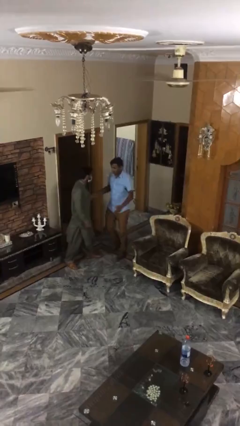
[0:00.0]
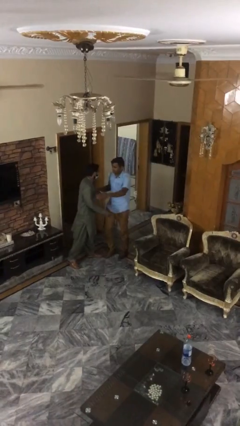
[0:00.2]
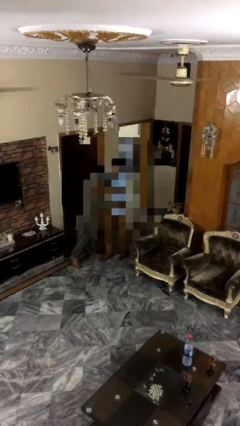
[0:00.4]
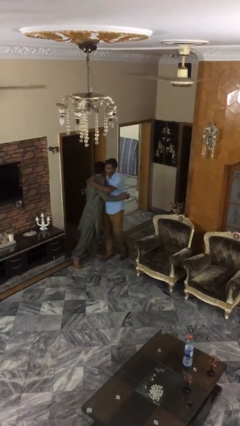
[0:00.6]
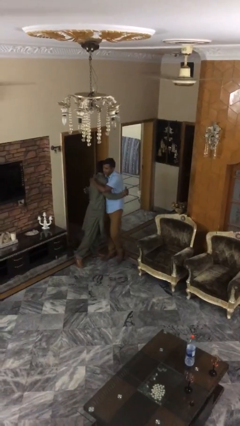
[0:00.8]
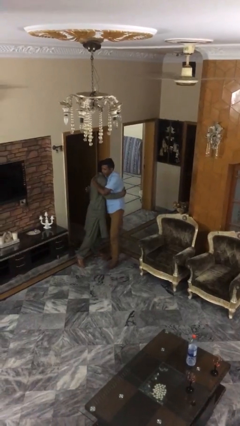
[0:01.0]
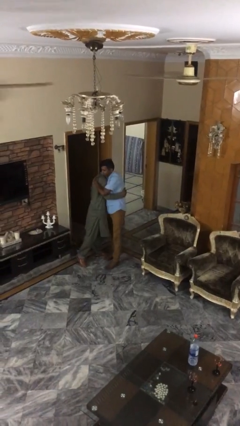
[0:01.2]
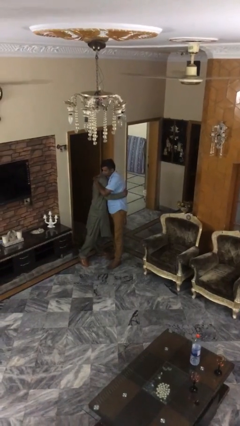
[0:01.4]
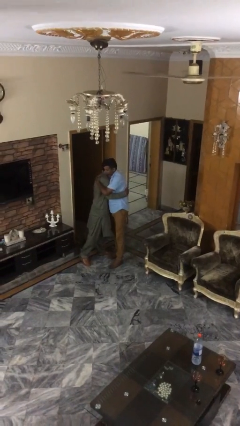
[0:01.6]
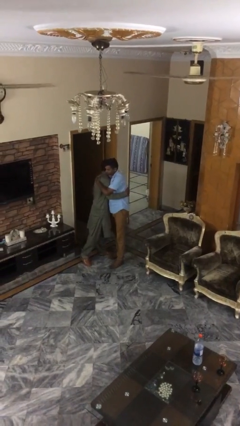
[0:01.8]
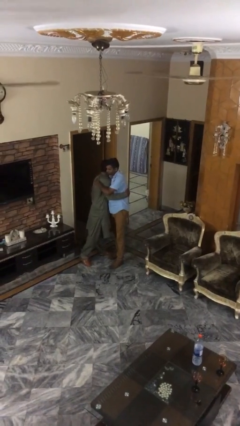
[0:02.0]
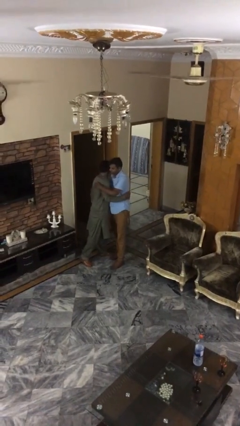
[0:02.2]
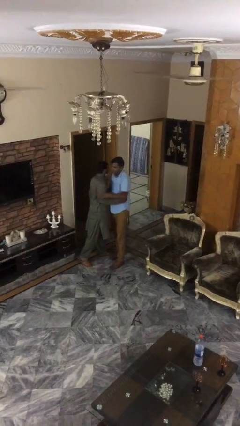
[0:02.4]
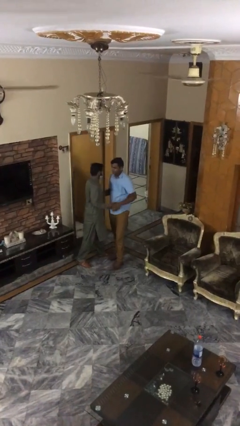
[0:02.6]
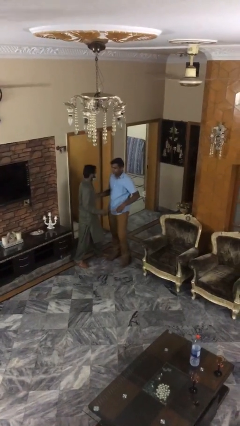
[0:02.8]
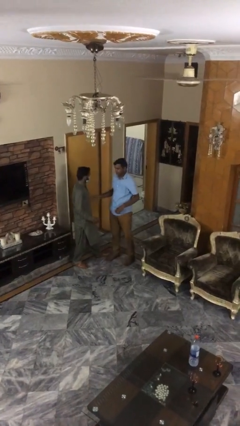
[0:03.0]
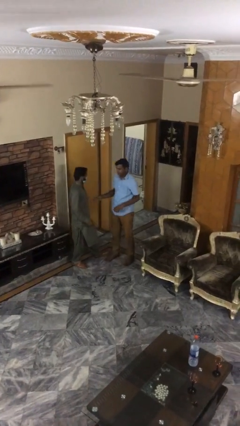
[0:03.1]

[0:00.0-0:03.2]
person embraces person

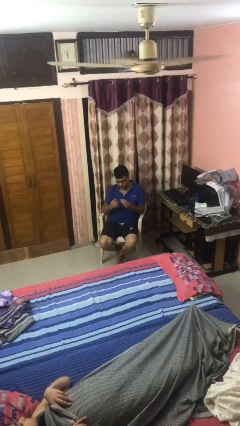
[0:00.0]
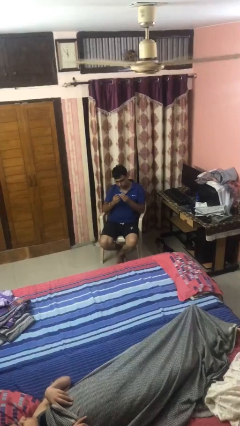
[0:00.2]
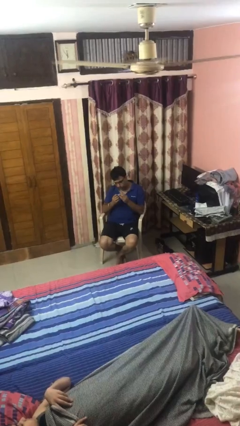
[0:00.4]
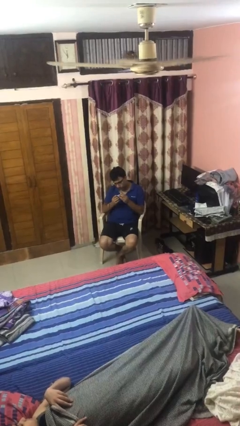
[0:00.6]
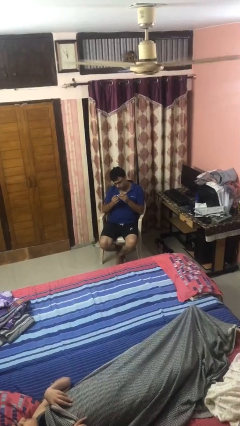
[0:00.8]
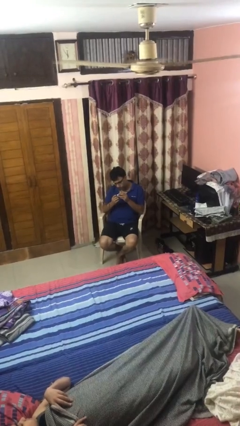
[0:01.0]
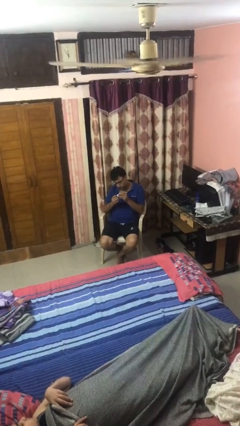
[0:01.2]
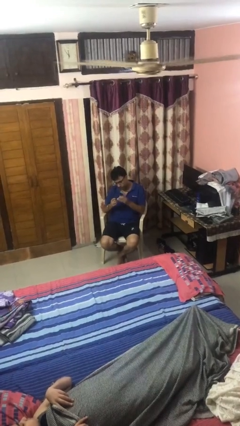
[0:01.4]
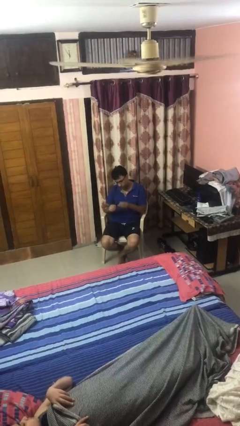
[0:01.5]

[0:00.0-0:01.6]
person clips fingernails

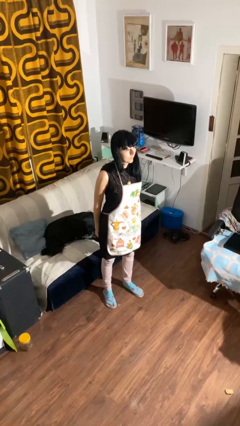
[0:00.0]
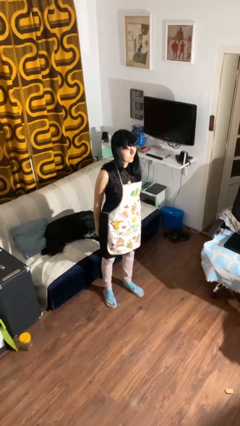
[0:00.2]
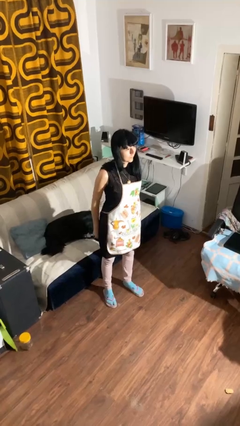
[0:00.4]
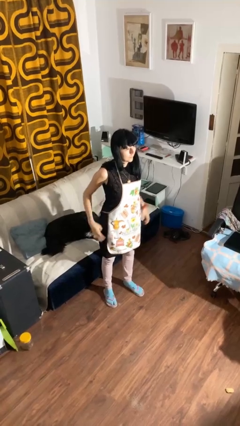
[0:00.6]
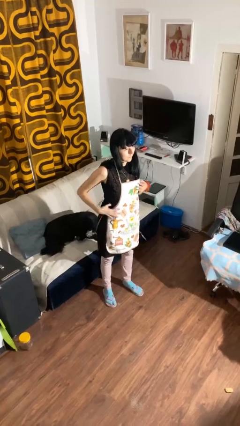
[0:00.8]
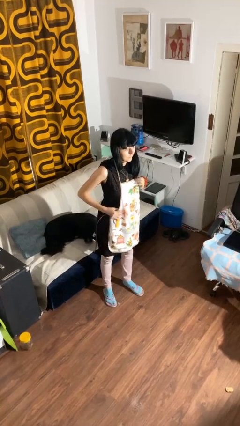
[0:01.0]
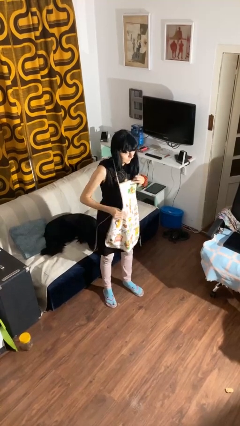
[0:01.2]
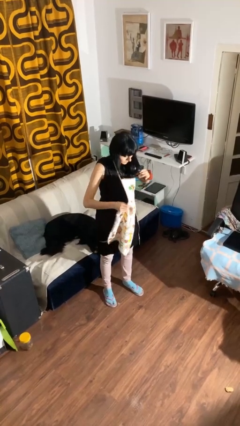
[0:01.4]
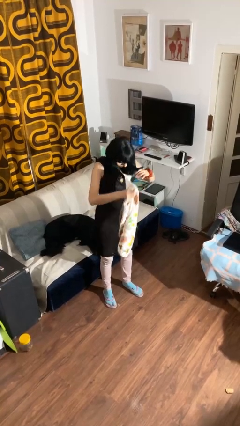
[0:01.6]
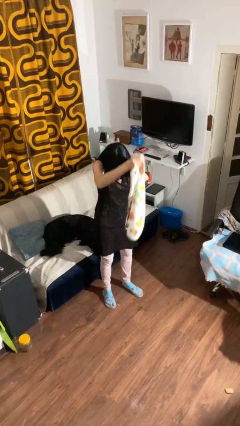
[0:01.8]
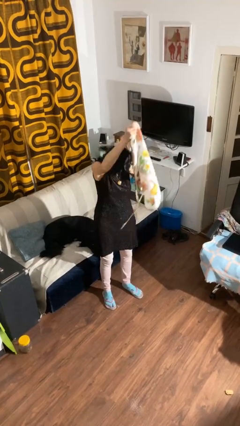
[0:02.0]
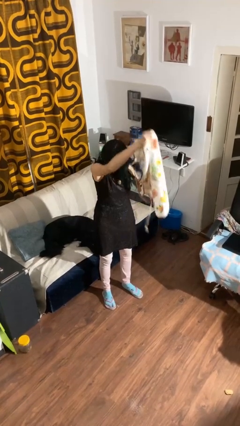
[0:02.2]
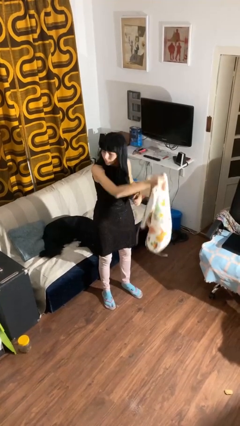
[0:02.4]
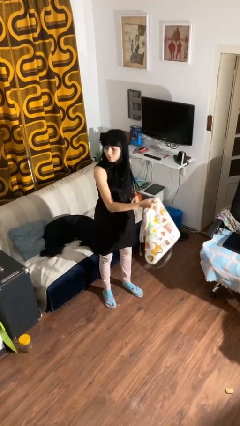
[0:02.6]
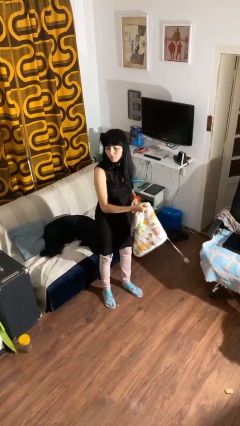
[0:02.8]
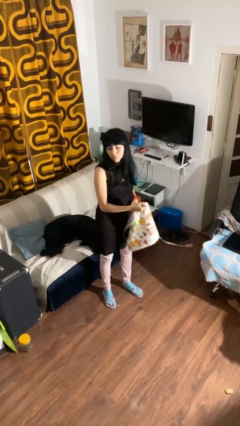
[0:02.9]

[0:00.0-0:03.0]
person takes off apron

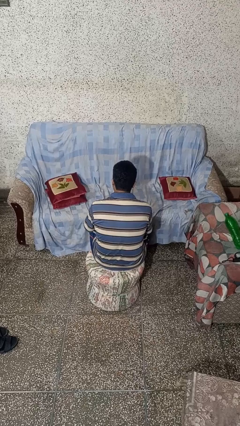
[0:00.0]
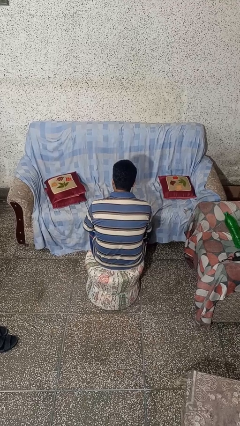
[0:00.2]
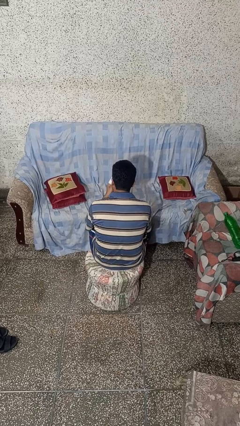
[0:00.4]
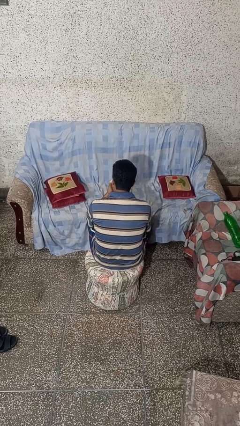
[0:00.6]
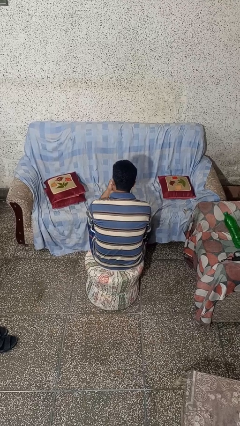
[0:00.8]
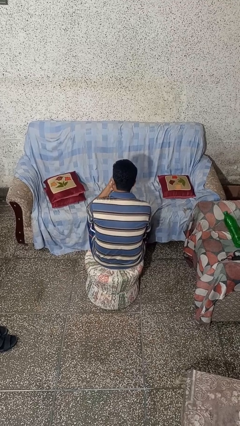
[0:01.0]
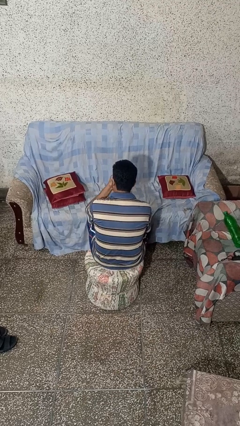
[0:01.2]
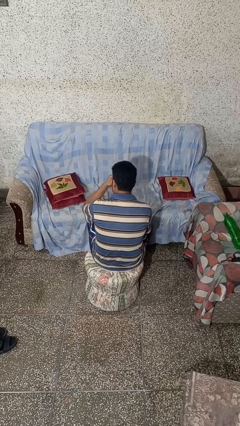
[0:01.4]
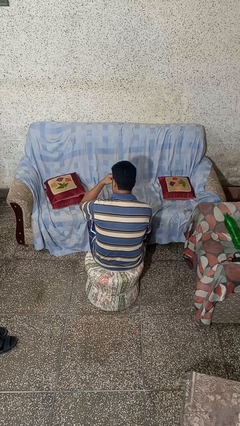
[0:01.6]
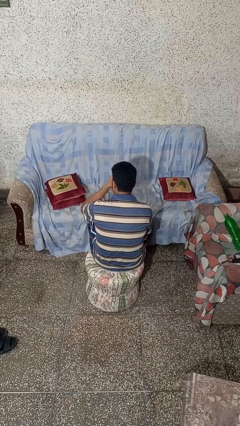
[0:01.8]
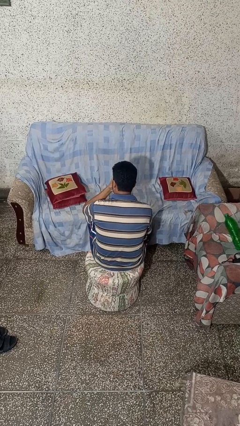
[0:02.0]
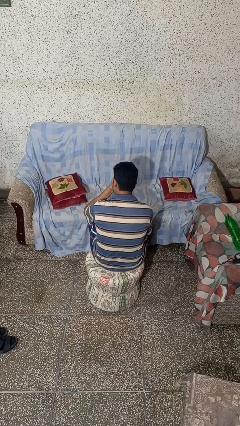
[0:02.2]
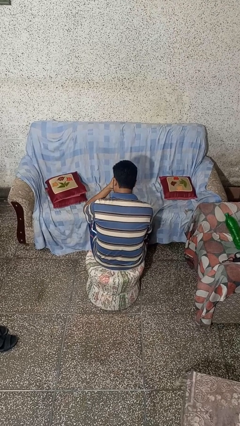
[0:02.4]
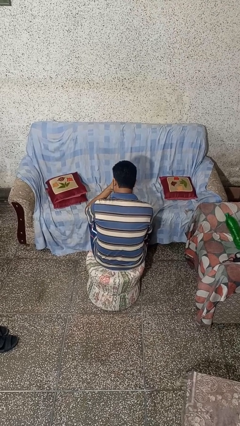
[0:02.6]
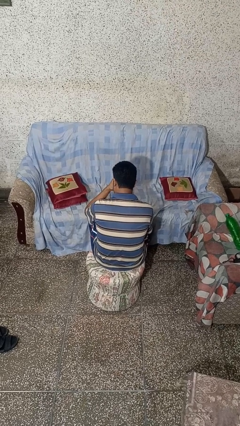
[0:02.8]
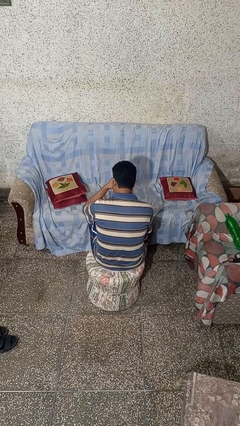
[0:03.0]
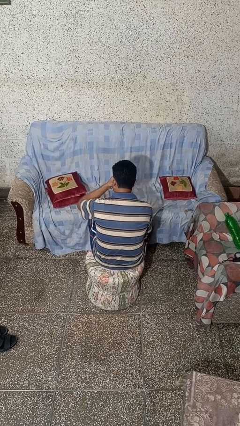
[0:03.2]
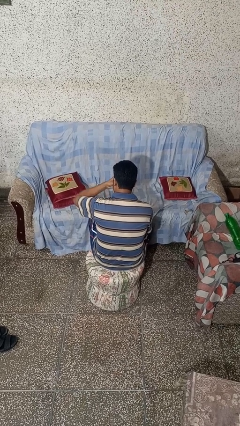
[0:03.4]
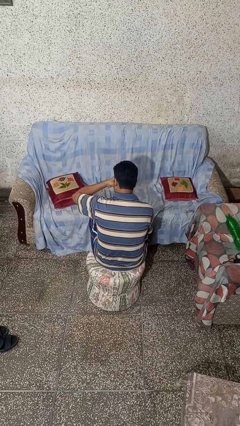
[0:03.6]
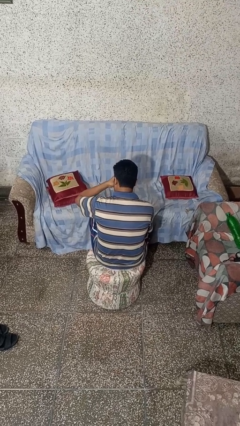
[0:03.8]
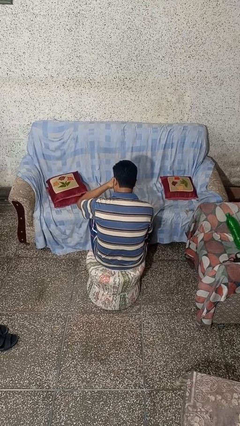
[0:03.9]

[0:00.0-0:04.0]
person blows nose

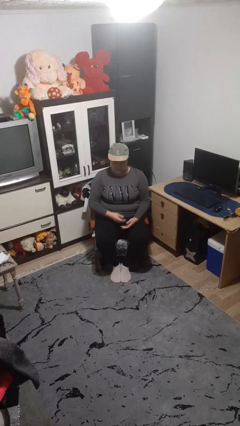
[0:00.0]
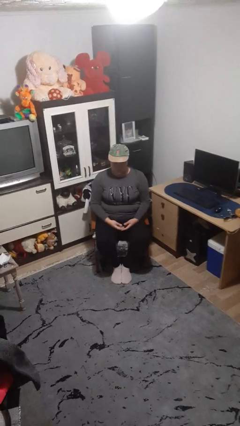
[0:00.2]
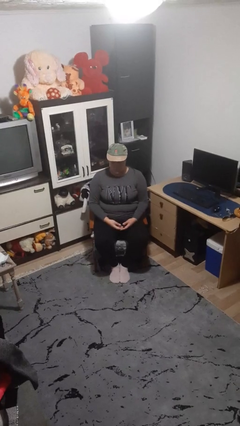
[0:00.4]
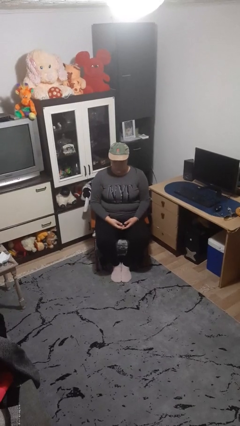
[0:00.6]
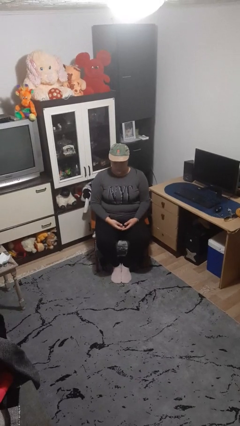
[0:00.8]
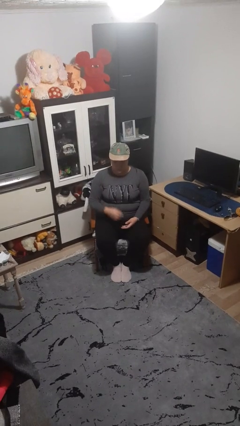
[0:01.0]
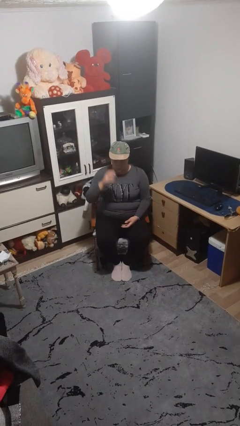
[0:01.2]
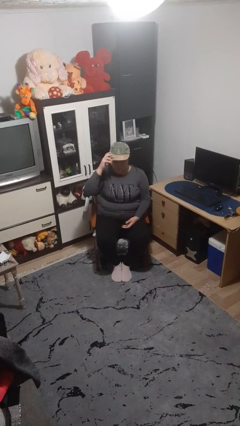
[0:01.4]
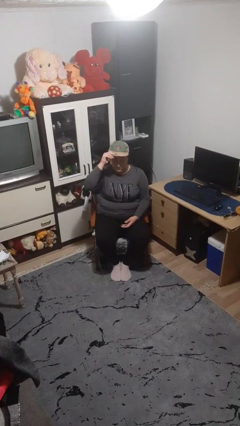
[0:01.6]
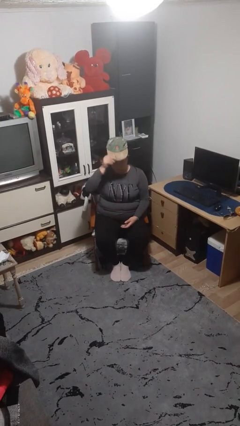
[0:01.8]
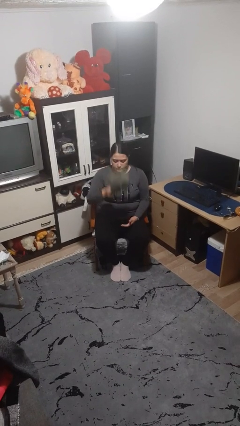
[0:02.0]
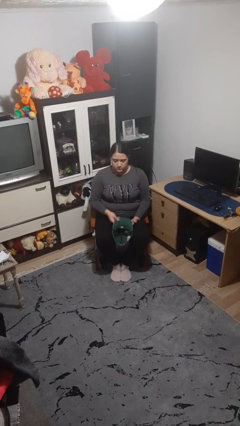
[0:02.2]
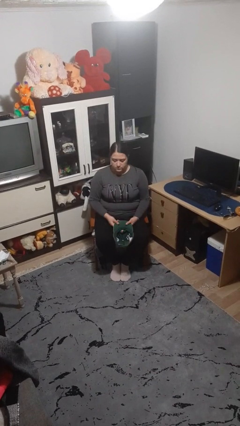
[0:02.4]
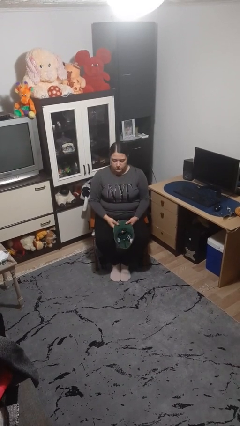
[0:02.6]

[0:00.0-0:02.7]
person takes off hat

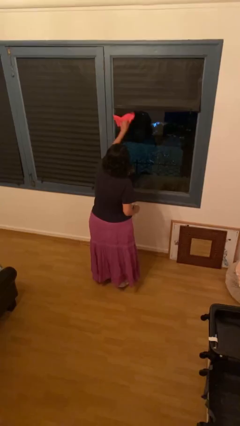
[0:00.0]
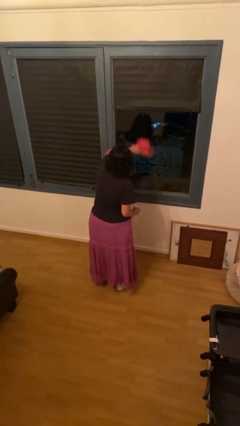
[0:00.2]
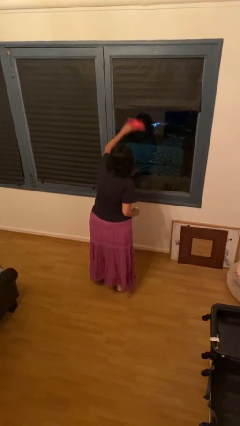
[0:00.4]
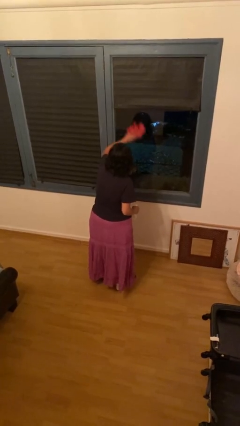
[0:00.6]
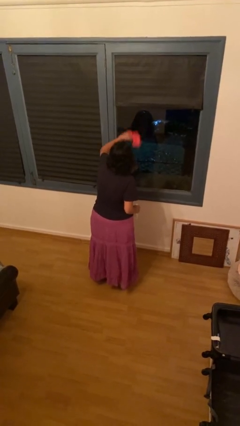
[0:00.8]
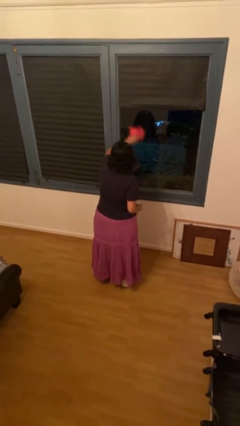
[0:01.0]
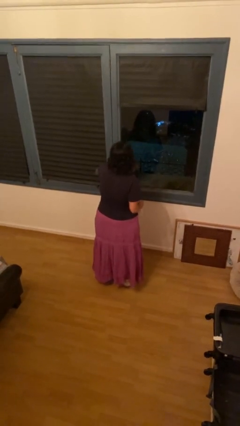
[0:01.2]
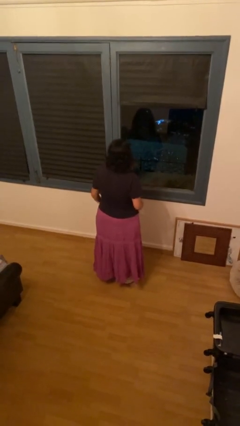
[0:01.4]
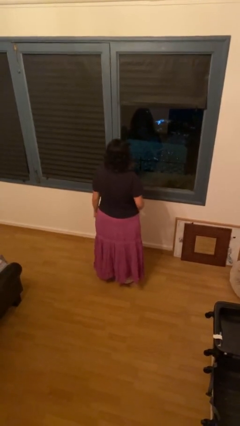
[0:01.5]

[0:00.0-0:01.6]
person washes window

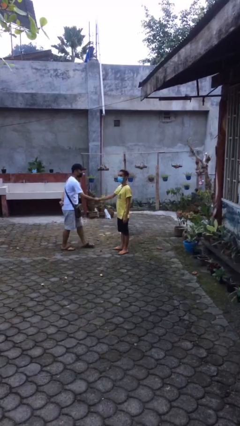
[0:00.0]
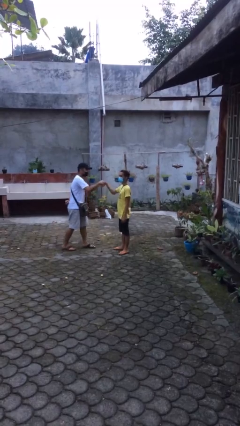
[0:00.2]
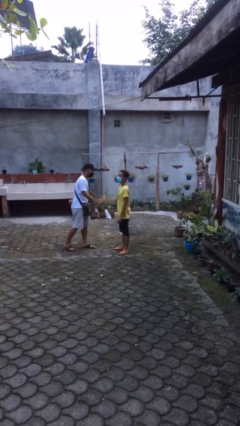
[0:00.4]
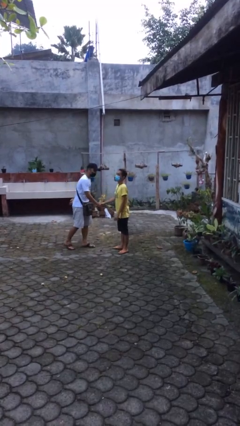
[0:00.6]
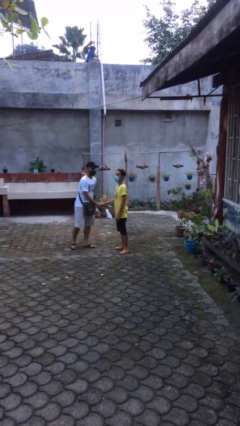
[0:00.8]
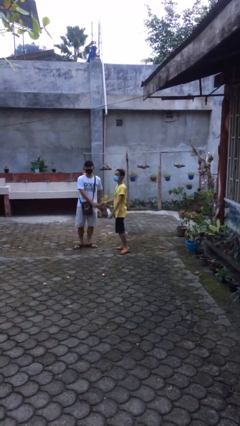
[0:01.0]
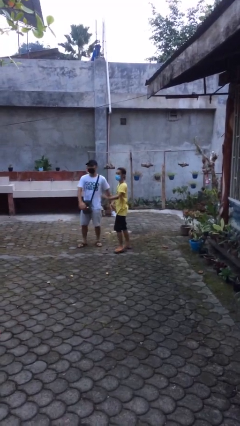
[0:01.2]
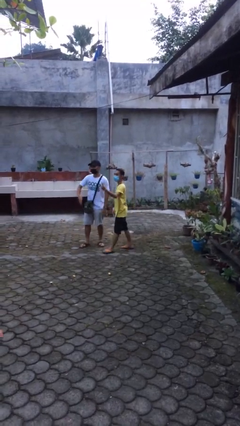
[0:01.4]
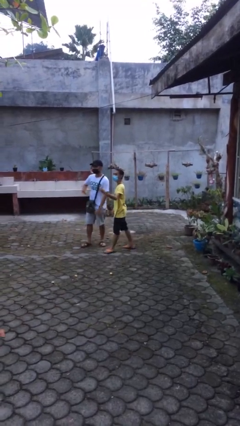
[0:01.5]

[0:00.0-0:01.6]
person shakes hand
